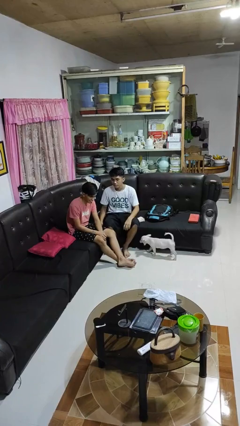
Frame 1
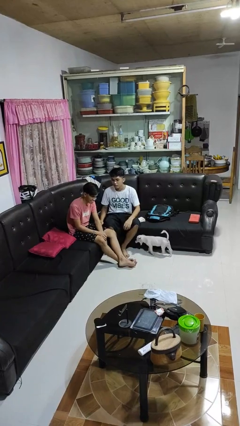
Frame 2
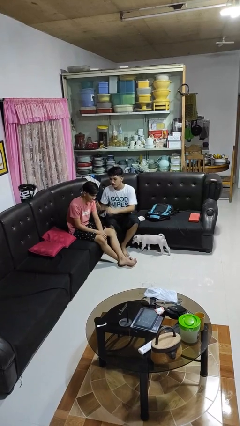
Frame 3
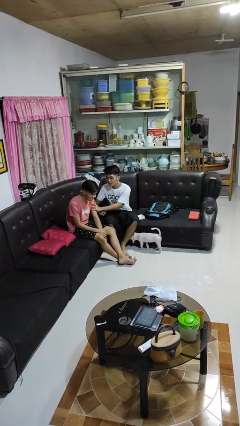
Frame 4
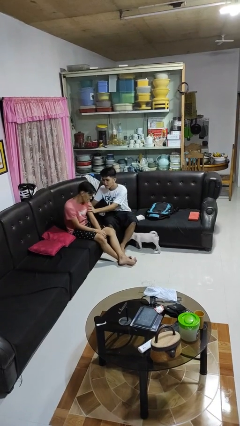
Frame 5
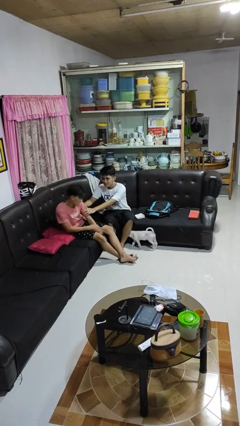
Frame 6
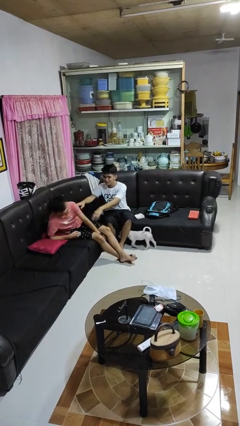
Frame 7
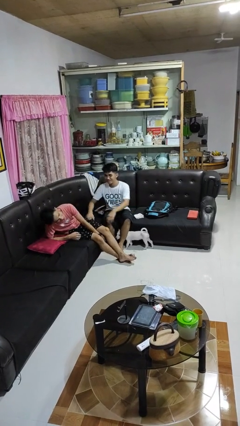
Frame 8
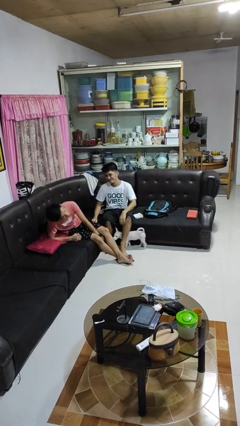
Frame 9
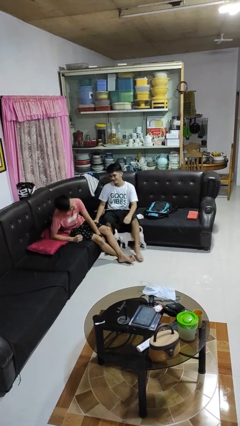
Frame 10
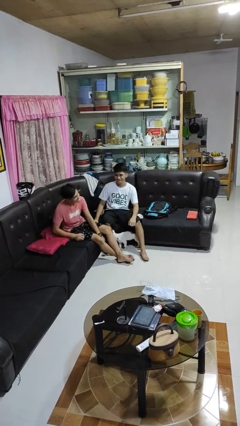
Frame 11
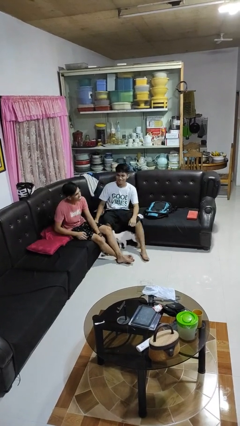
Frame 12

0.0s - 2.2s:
person shoves person

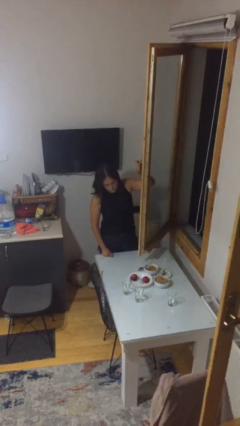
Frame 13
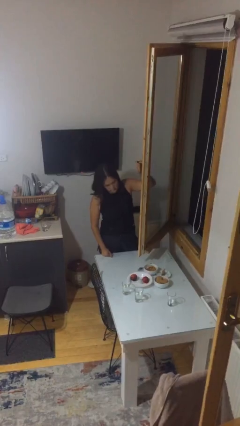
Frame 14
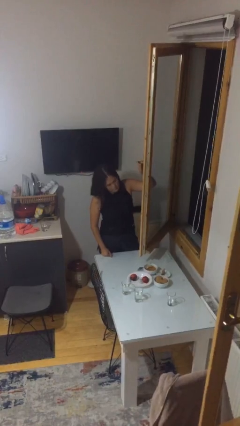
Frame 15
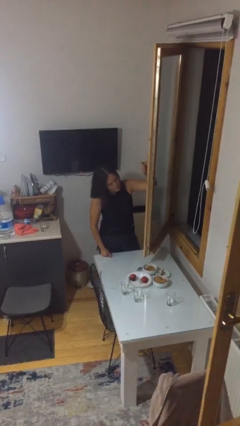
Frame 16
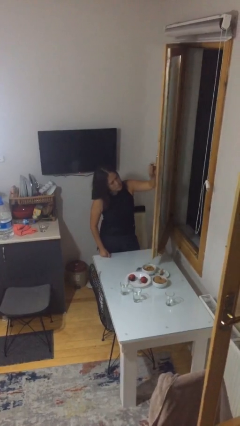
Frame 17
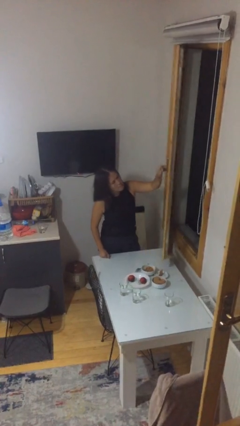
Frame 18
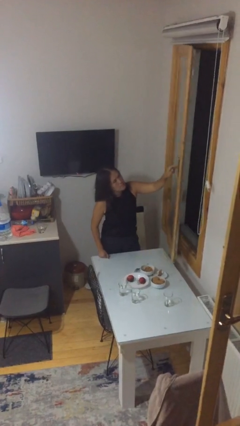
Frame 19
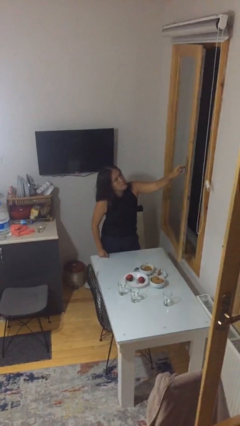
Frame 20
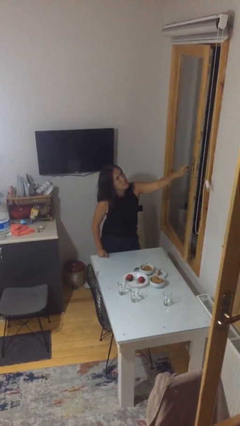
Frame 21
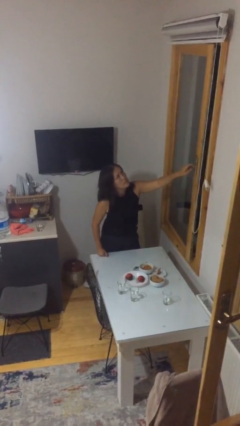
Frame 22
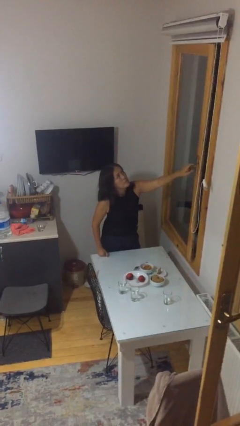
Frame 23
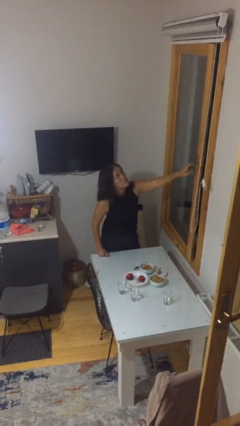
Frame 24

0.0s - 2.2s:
person closes home window

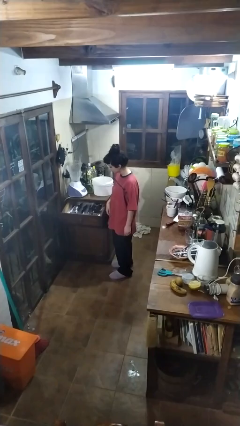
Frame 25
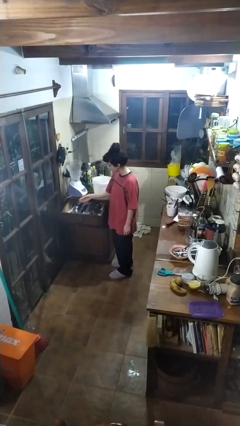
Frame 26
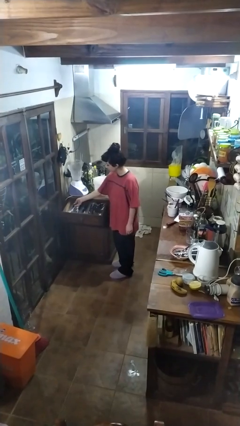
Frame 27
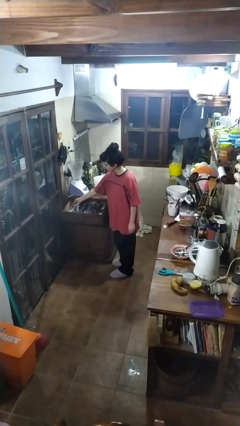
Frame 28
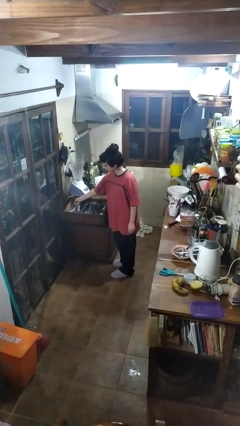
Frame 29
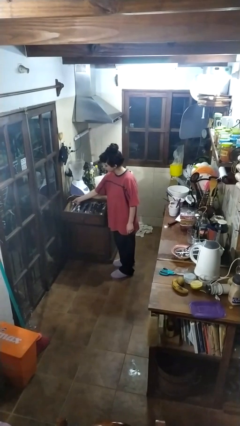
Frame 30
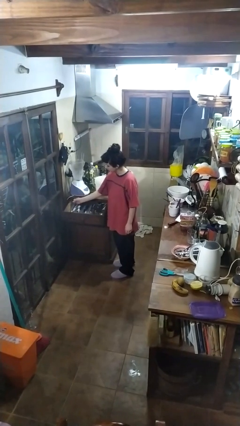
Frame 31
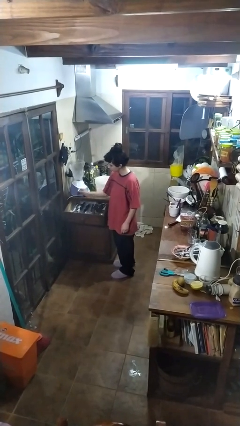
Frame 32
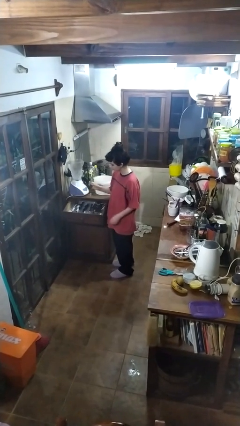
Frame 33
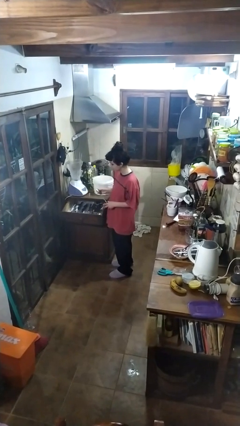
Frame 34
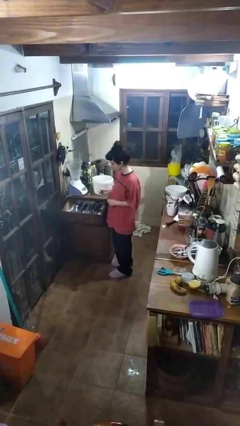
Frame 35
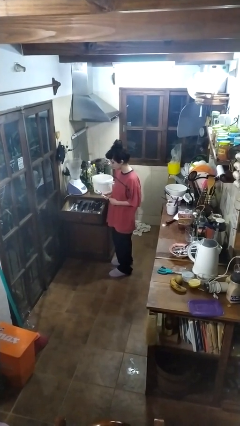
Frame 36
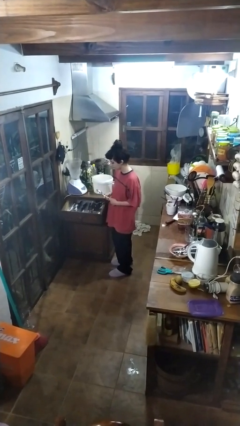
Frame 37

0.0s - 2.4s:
person takes object from kitchen drawer

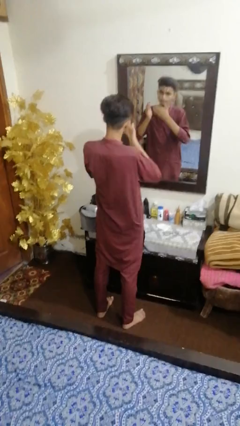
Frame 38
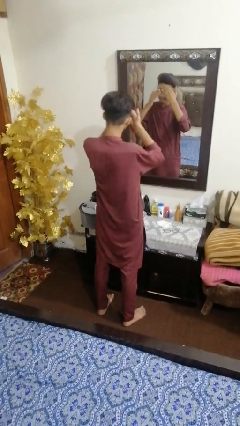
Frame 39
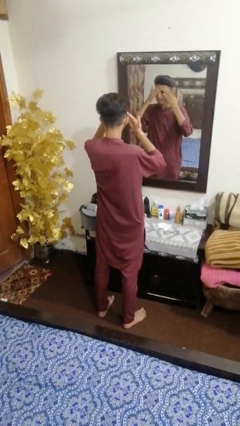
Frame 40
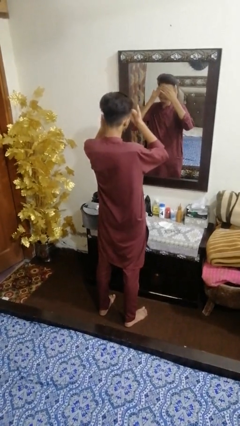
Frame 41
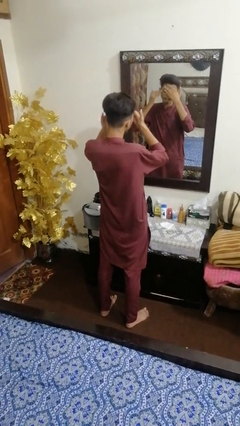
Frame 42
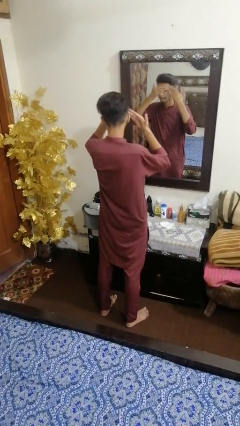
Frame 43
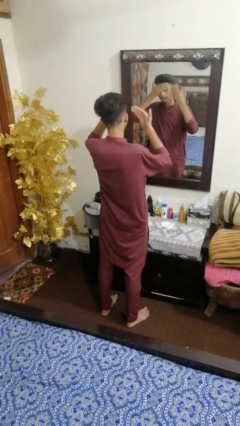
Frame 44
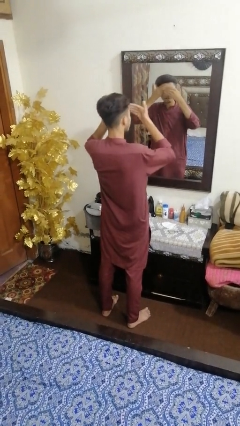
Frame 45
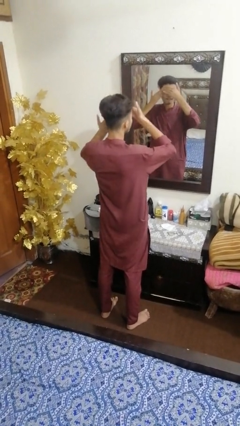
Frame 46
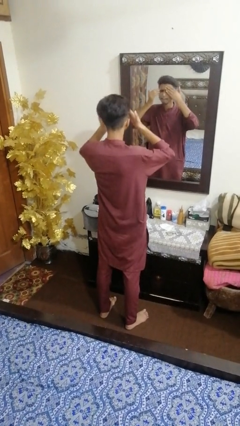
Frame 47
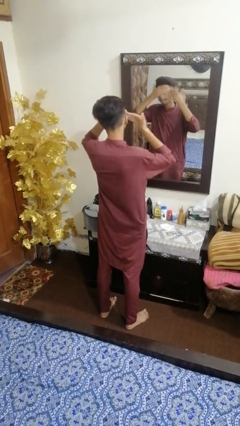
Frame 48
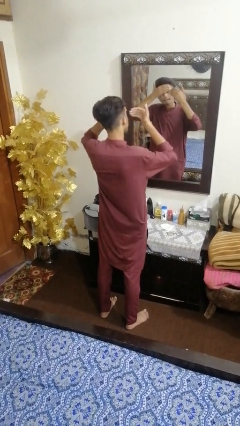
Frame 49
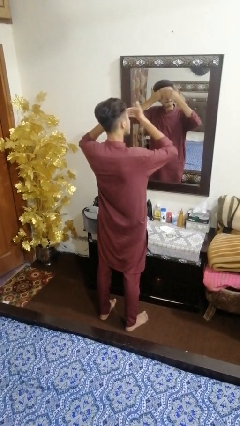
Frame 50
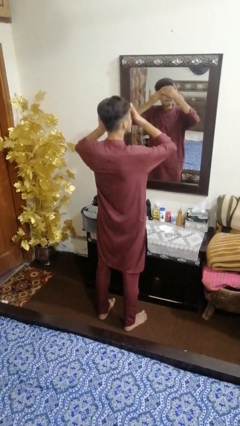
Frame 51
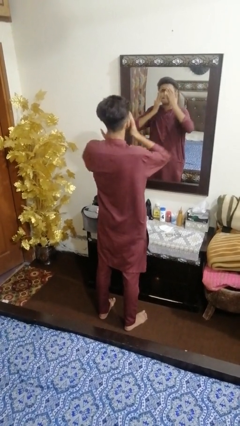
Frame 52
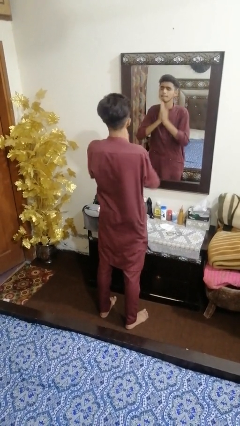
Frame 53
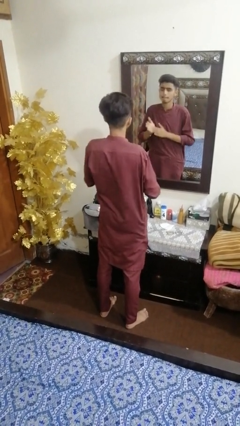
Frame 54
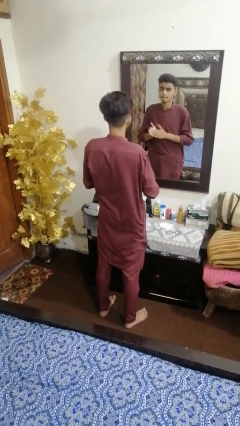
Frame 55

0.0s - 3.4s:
person applies foundation makeup

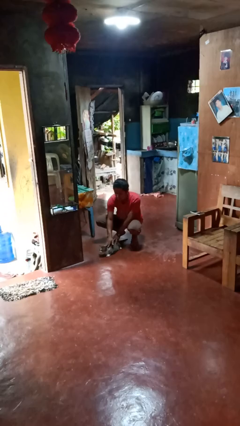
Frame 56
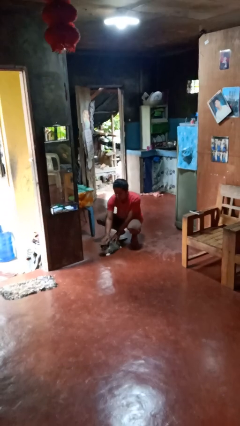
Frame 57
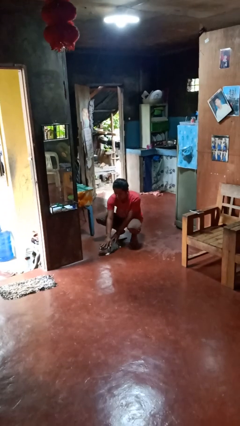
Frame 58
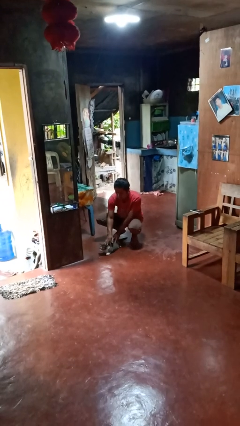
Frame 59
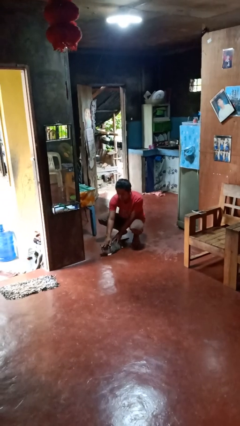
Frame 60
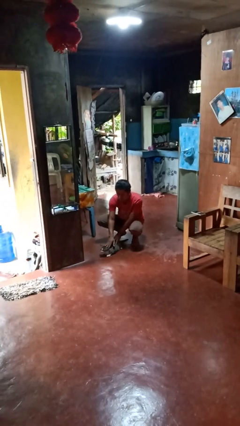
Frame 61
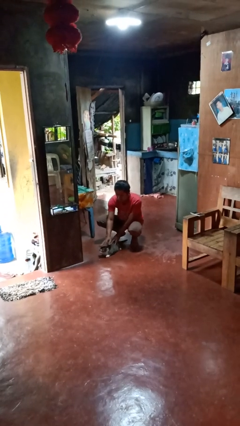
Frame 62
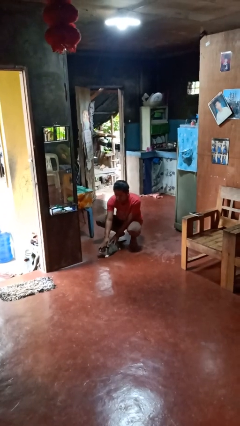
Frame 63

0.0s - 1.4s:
person pets cat

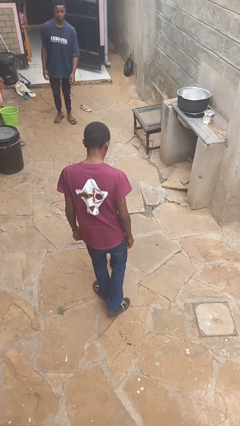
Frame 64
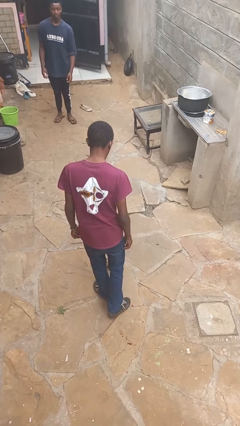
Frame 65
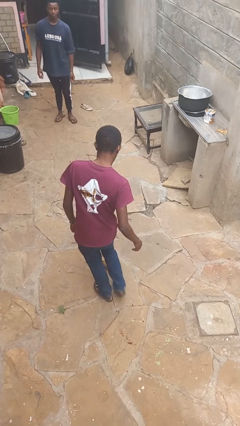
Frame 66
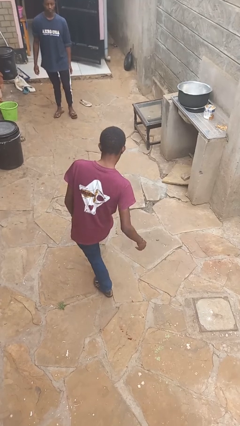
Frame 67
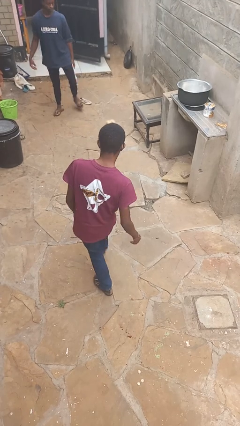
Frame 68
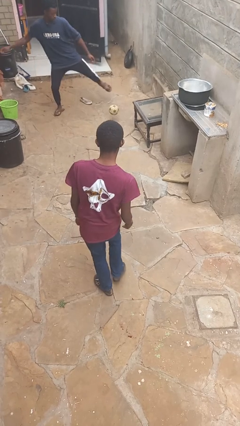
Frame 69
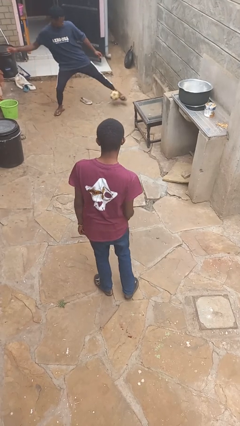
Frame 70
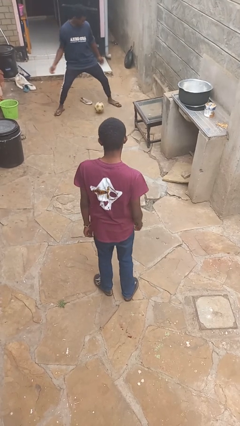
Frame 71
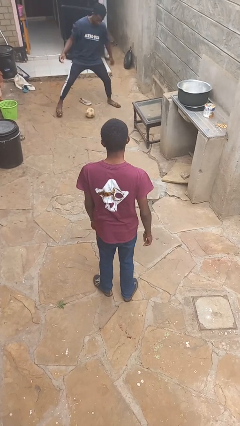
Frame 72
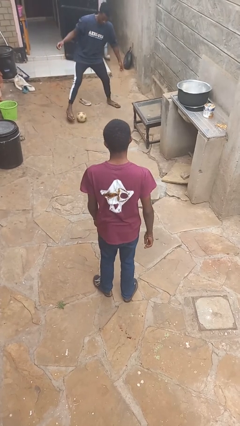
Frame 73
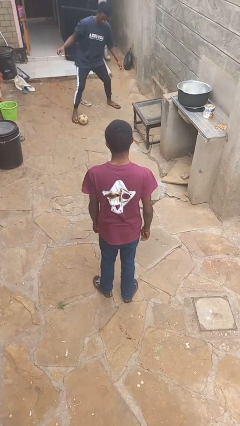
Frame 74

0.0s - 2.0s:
person kicks object to person

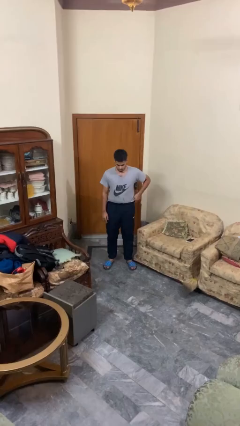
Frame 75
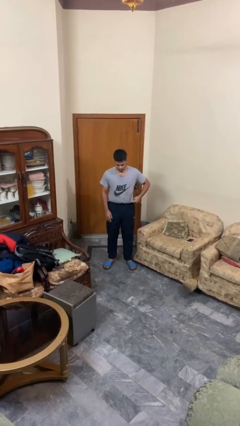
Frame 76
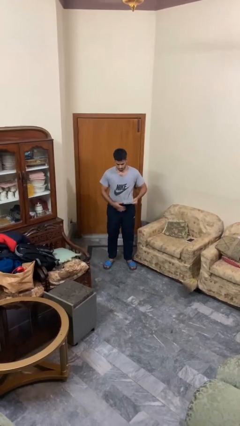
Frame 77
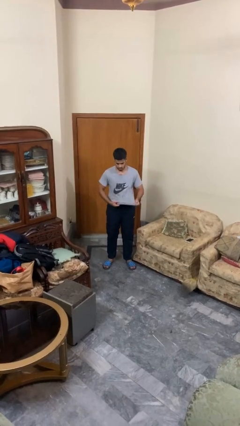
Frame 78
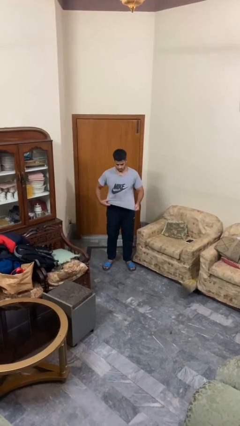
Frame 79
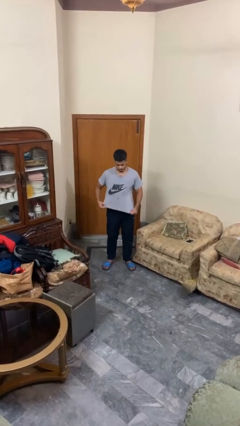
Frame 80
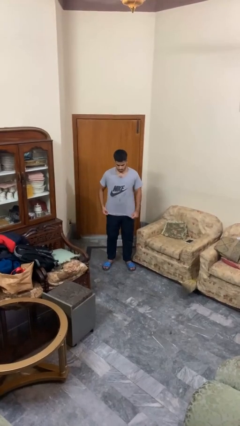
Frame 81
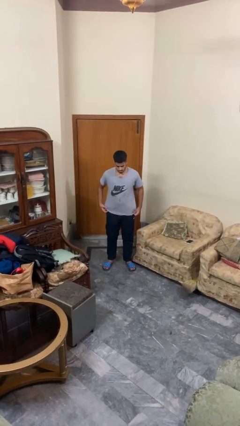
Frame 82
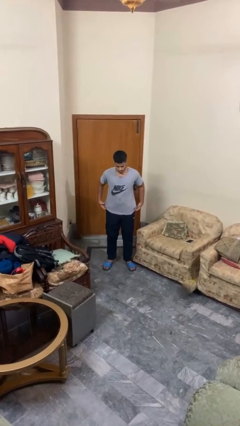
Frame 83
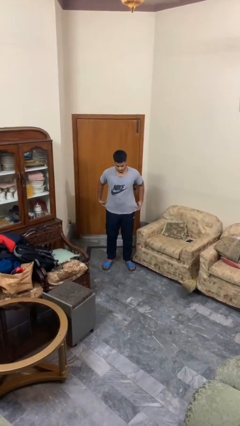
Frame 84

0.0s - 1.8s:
person untucks shirt

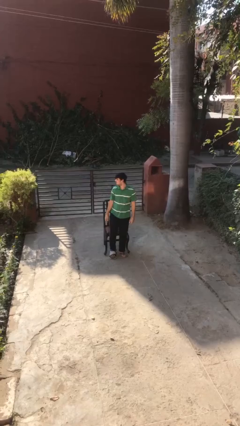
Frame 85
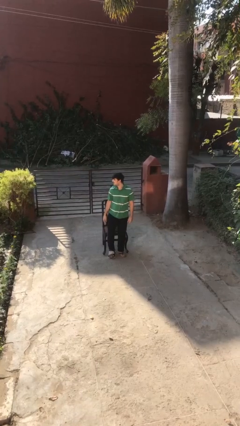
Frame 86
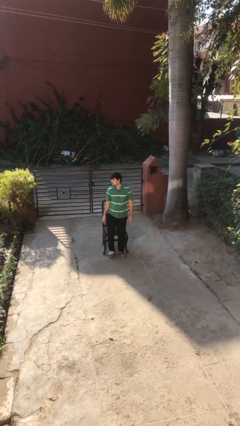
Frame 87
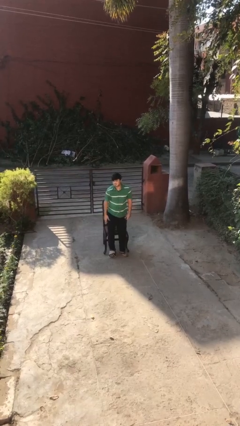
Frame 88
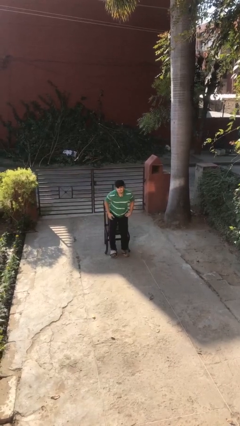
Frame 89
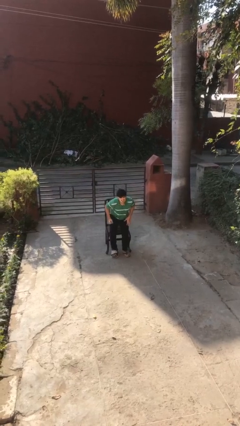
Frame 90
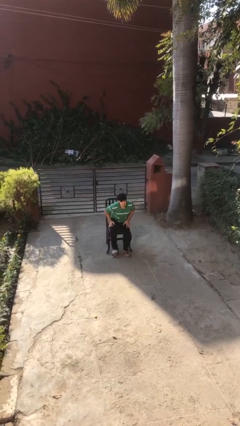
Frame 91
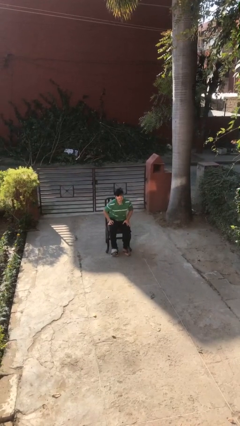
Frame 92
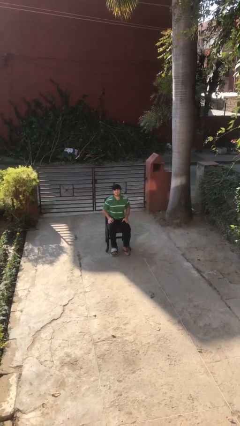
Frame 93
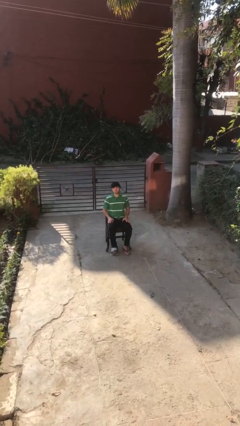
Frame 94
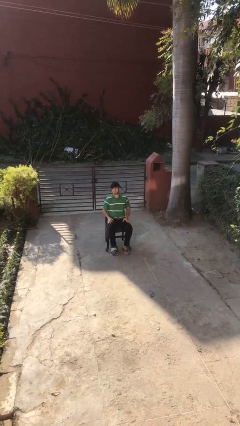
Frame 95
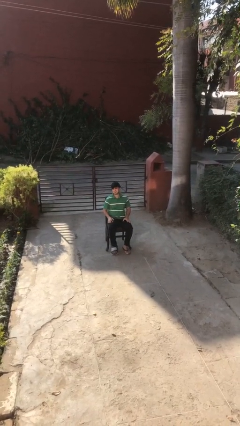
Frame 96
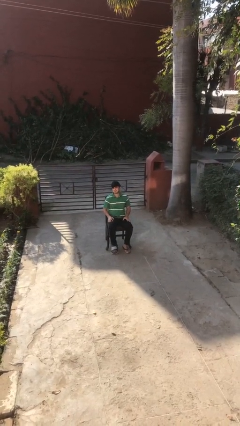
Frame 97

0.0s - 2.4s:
person sits down
